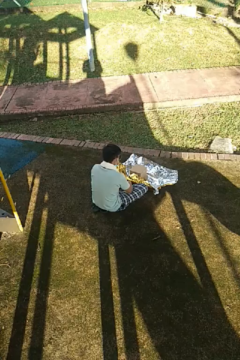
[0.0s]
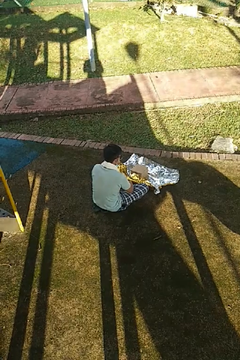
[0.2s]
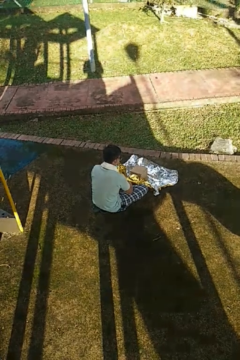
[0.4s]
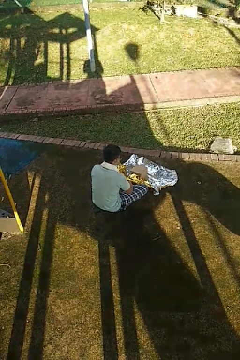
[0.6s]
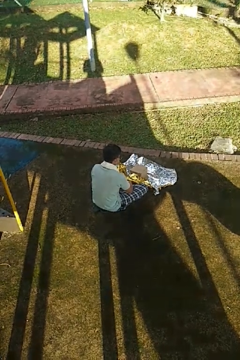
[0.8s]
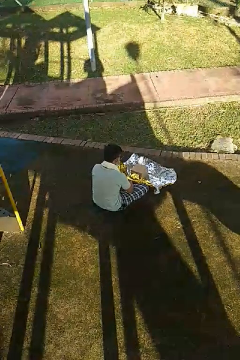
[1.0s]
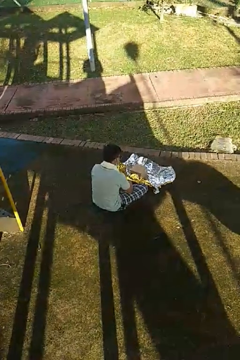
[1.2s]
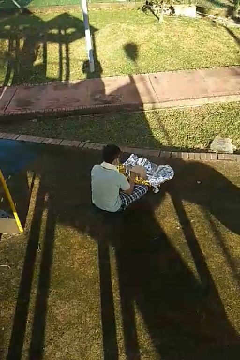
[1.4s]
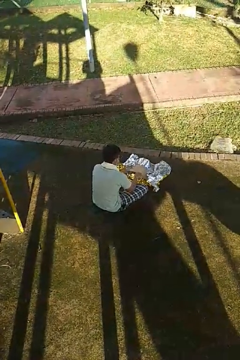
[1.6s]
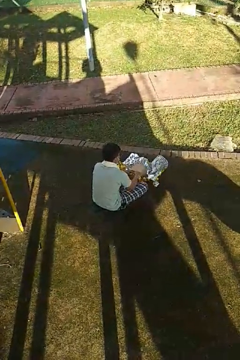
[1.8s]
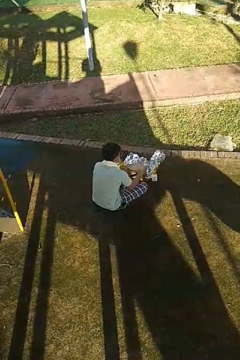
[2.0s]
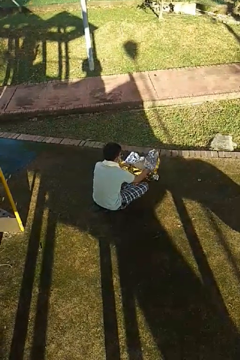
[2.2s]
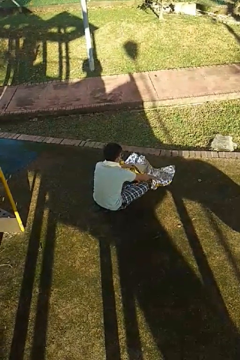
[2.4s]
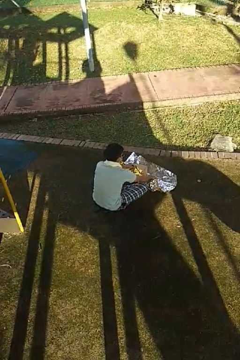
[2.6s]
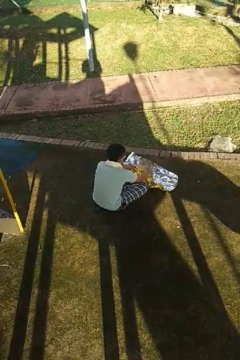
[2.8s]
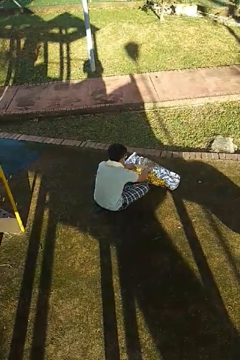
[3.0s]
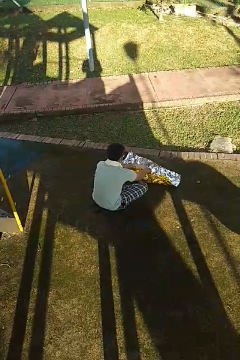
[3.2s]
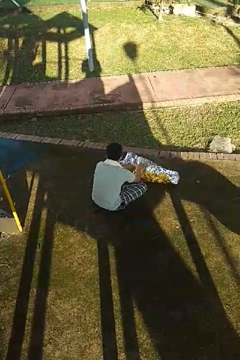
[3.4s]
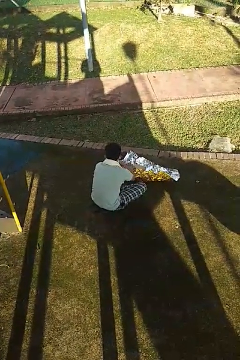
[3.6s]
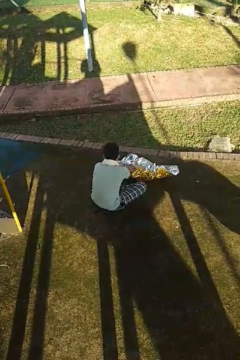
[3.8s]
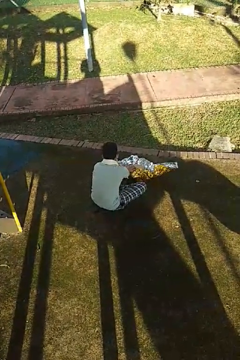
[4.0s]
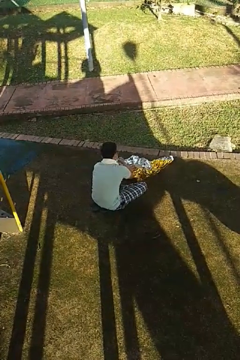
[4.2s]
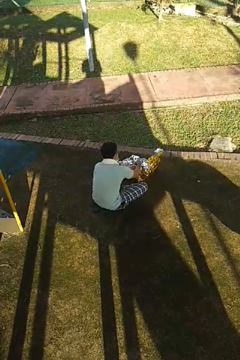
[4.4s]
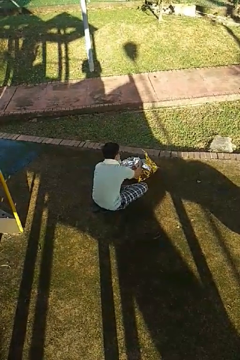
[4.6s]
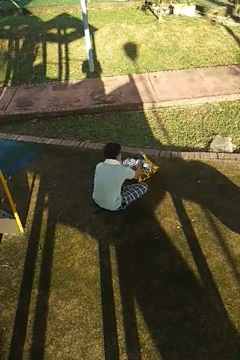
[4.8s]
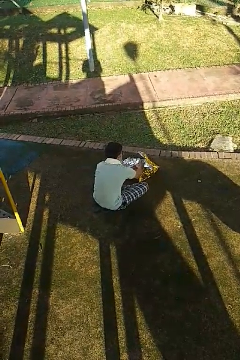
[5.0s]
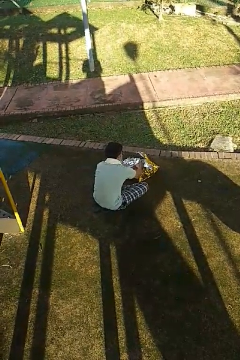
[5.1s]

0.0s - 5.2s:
person wraps box

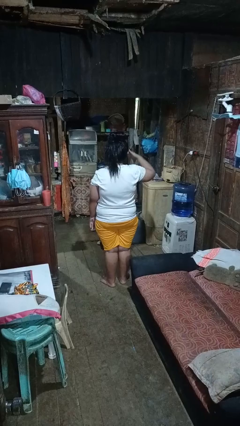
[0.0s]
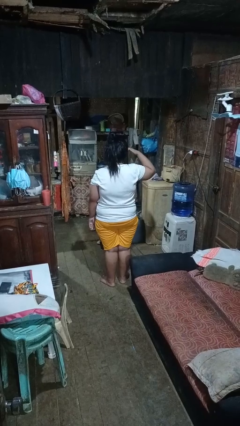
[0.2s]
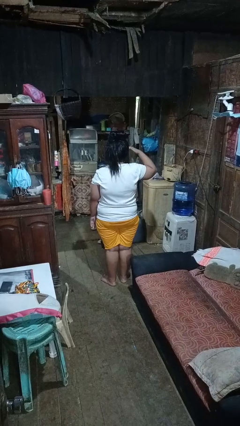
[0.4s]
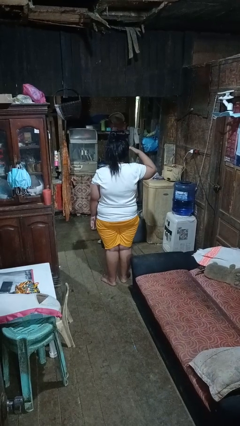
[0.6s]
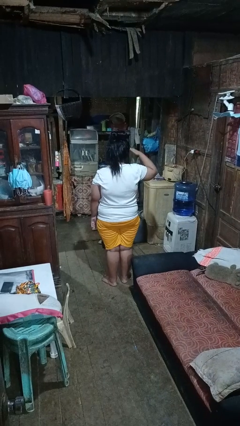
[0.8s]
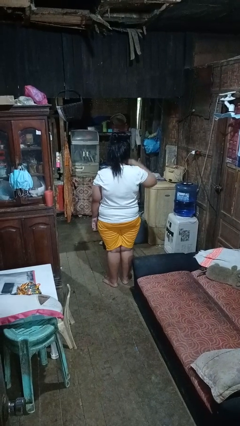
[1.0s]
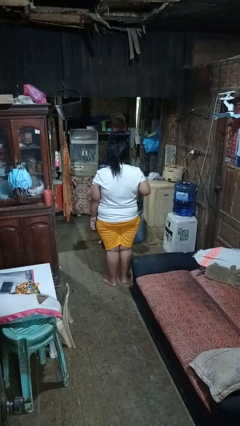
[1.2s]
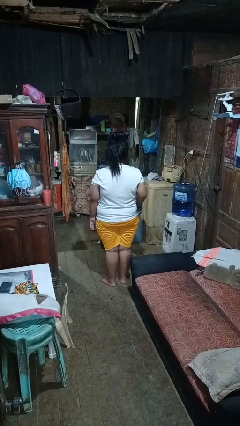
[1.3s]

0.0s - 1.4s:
person salutes

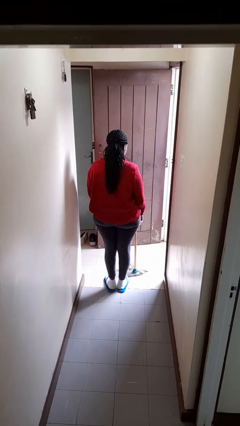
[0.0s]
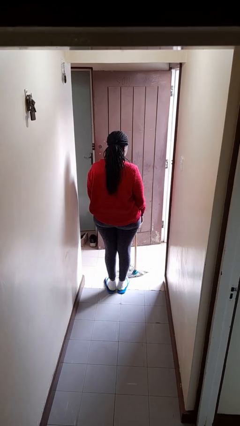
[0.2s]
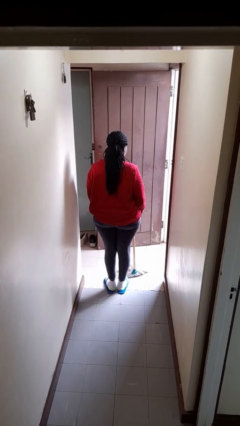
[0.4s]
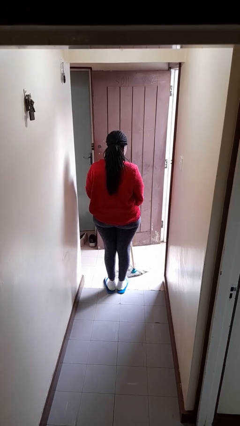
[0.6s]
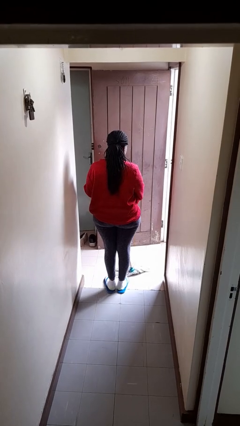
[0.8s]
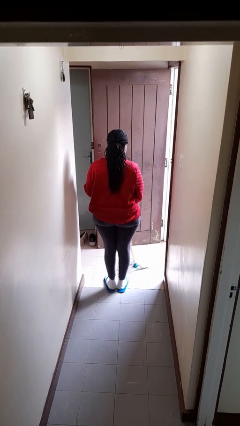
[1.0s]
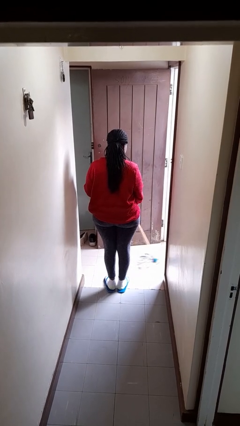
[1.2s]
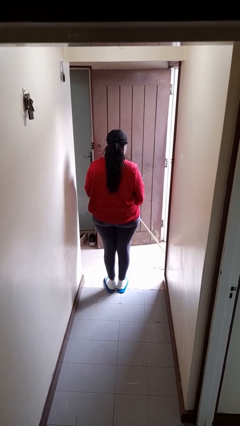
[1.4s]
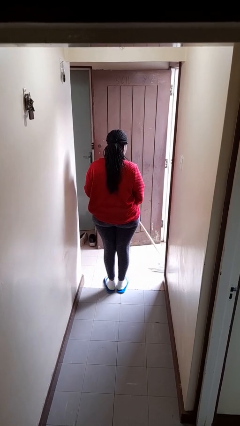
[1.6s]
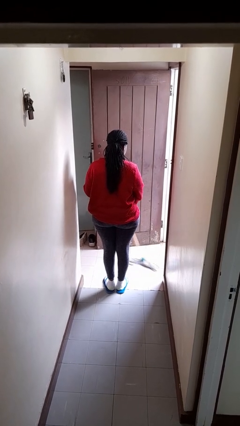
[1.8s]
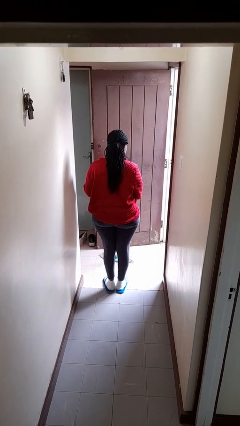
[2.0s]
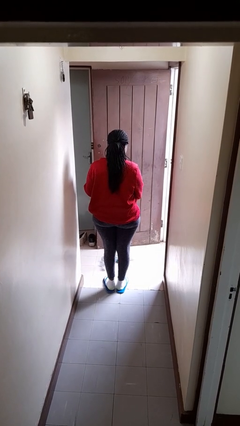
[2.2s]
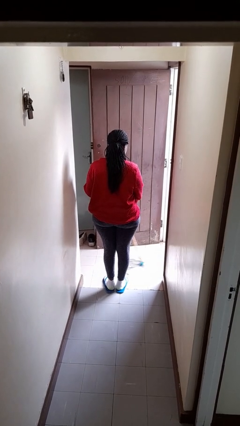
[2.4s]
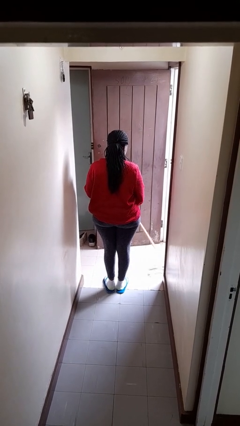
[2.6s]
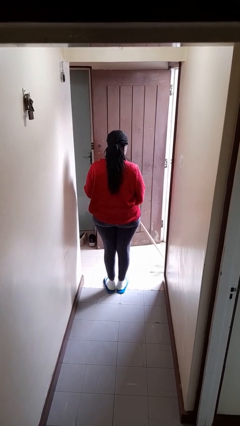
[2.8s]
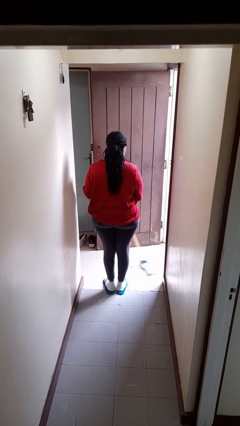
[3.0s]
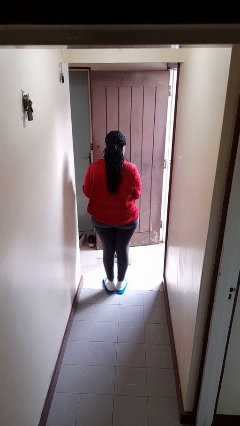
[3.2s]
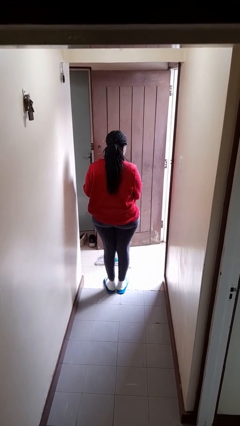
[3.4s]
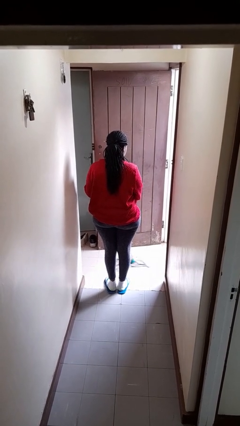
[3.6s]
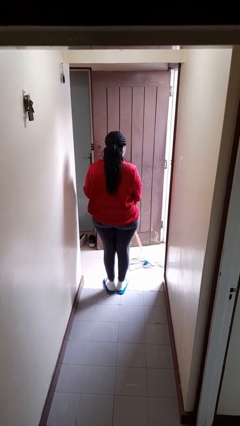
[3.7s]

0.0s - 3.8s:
person mops

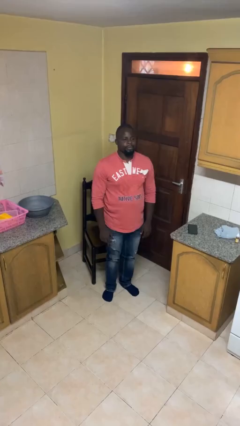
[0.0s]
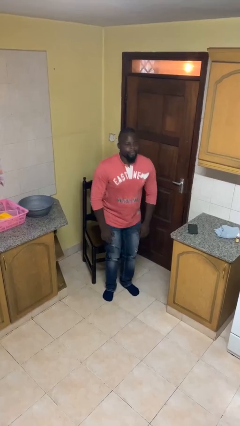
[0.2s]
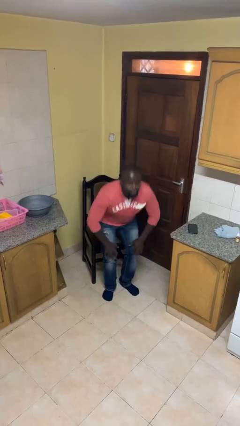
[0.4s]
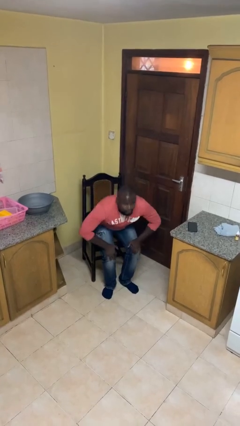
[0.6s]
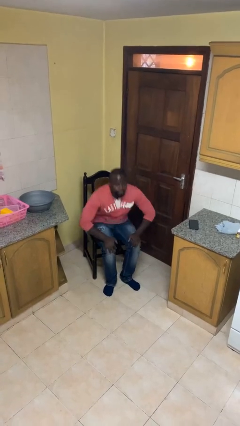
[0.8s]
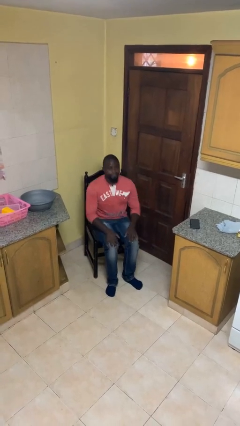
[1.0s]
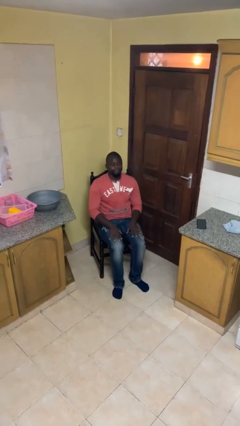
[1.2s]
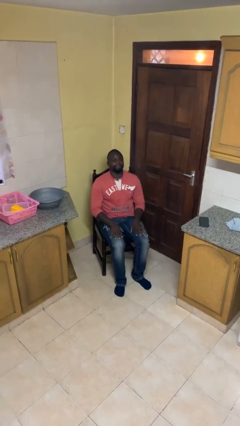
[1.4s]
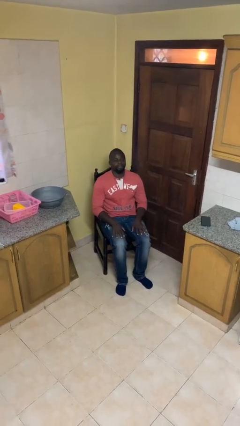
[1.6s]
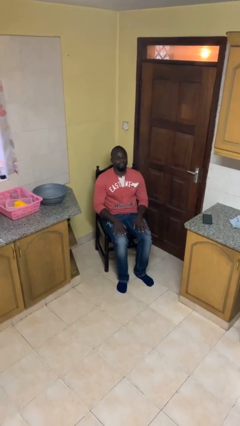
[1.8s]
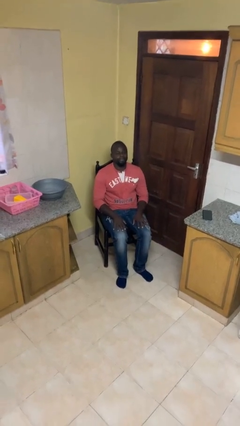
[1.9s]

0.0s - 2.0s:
person sits down

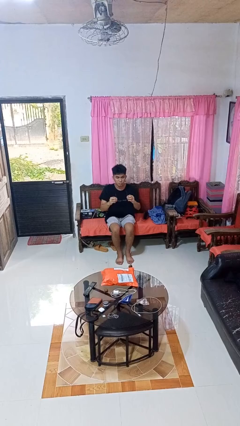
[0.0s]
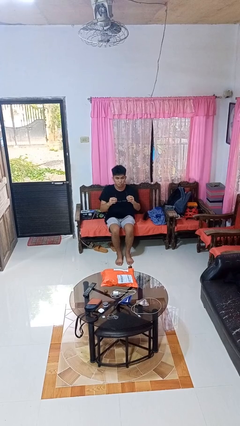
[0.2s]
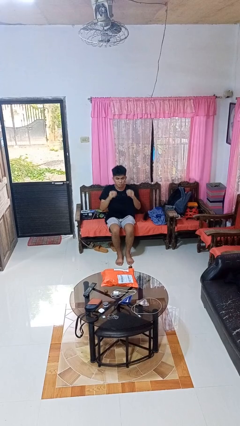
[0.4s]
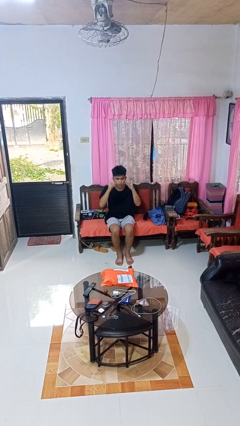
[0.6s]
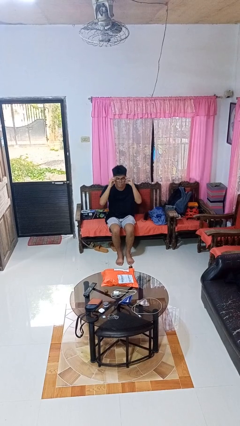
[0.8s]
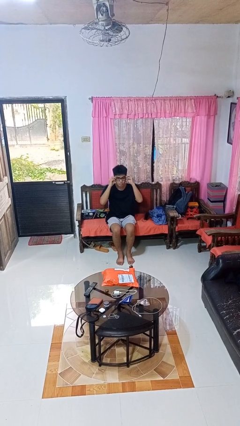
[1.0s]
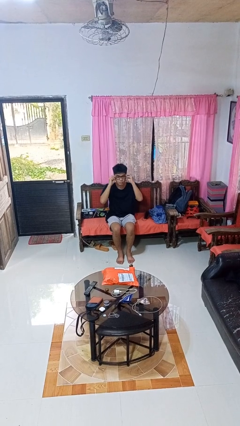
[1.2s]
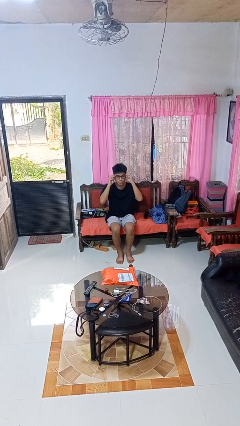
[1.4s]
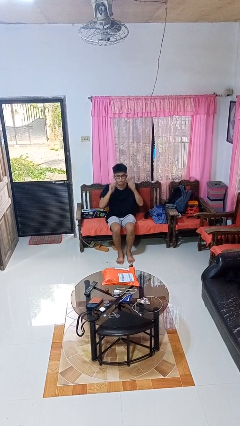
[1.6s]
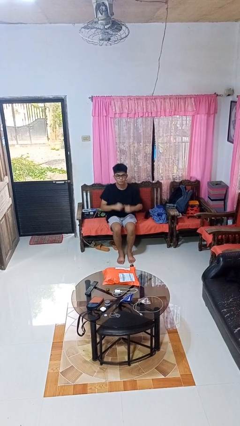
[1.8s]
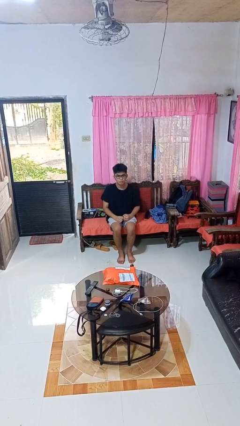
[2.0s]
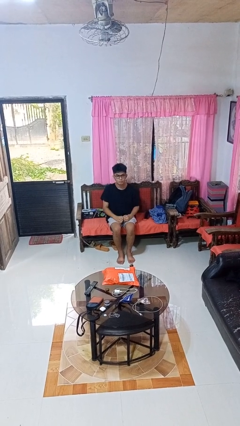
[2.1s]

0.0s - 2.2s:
person puts on glasses

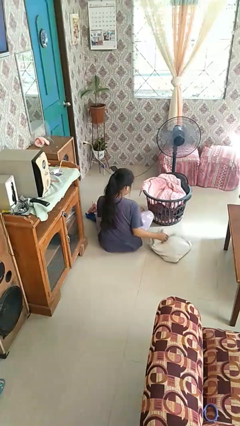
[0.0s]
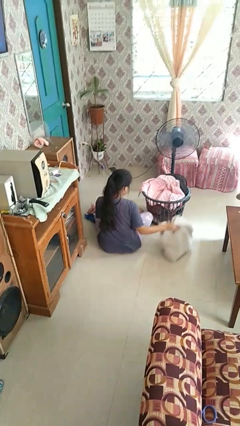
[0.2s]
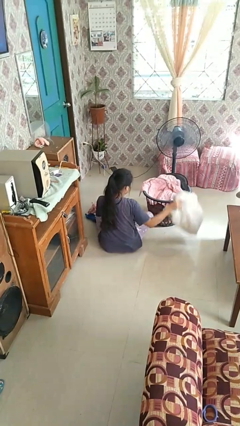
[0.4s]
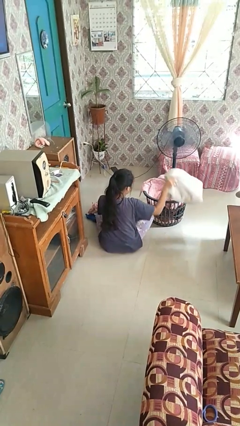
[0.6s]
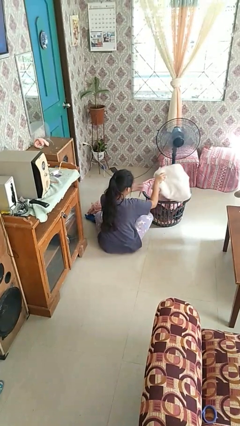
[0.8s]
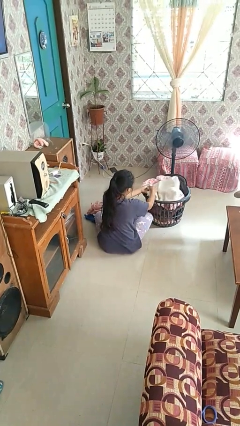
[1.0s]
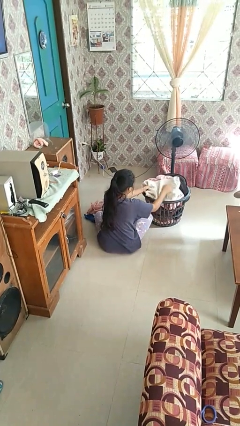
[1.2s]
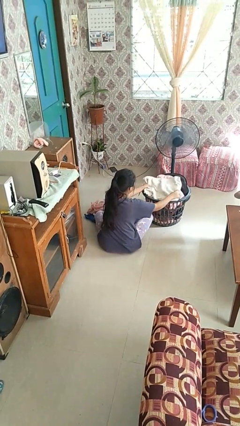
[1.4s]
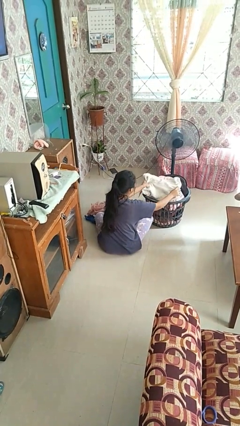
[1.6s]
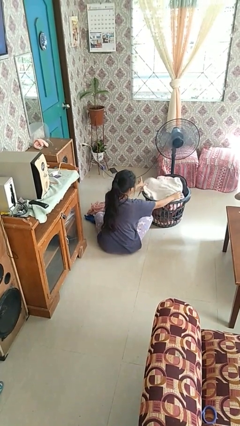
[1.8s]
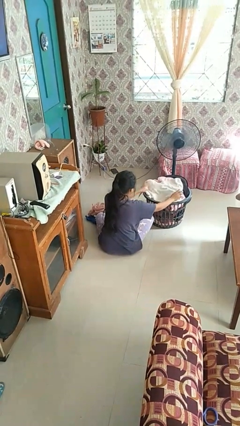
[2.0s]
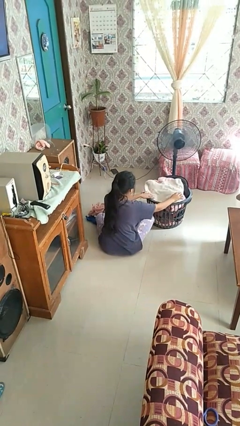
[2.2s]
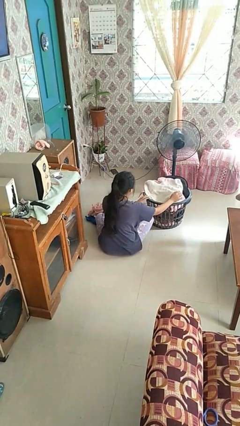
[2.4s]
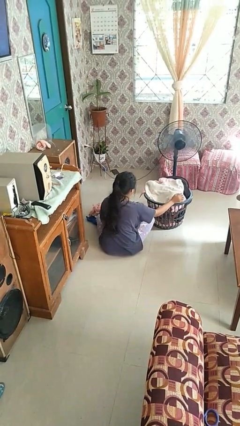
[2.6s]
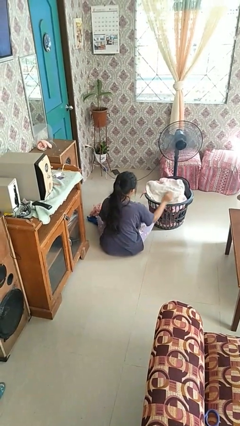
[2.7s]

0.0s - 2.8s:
person puts object into basket

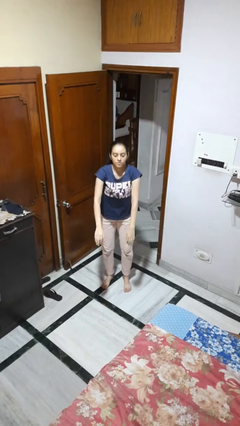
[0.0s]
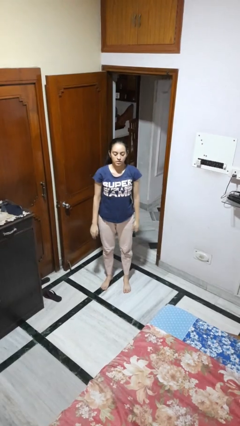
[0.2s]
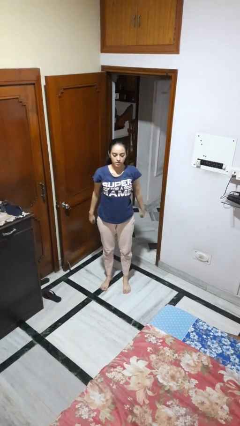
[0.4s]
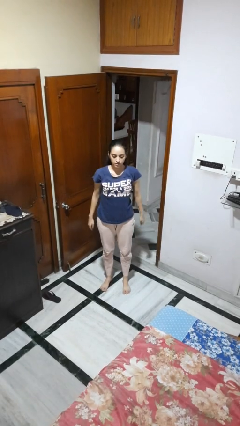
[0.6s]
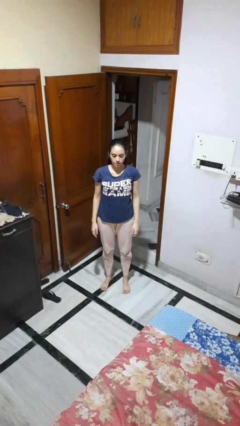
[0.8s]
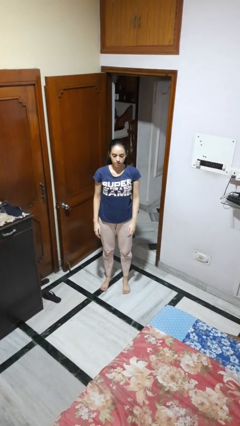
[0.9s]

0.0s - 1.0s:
person stands up
